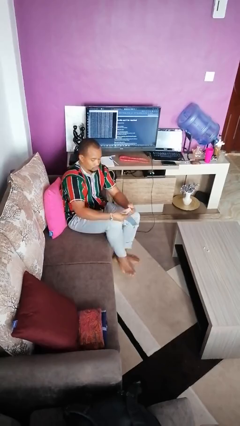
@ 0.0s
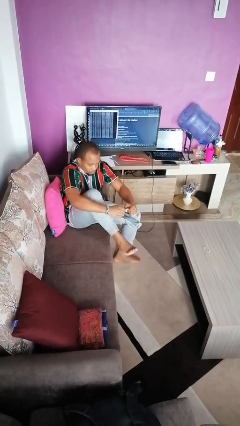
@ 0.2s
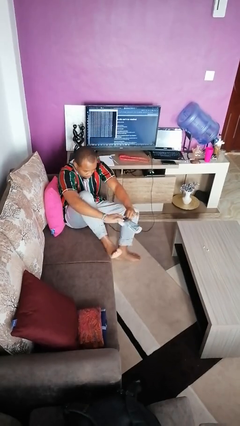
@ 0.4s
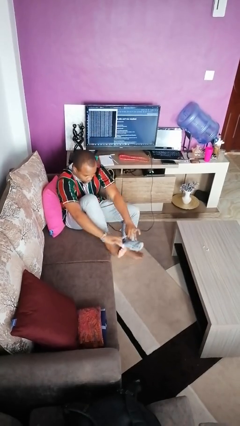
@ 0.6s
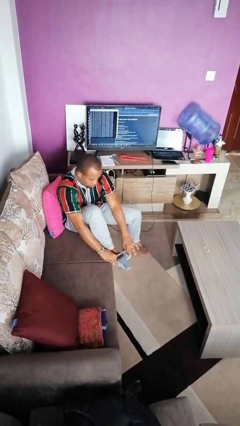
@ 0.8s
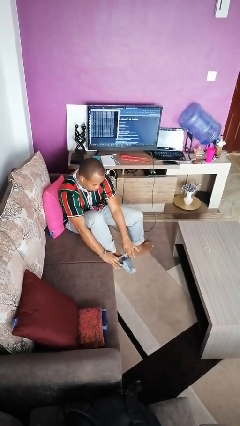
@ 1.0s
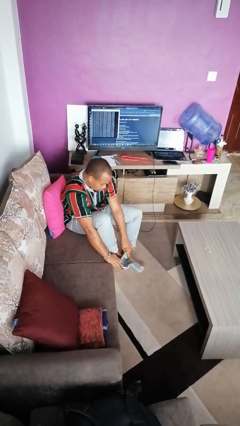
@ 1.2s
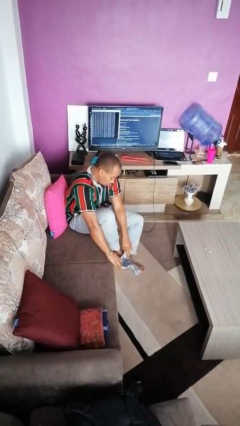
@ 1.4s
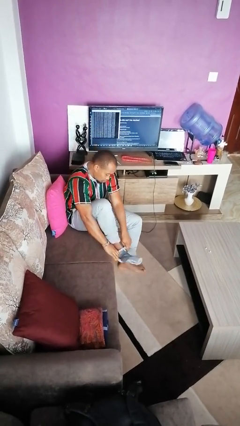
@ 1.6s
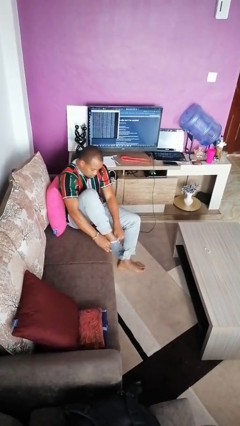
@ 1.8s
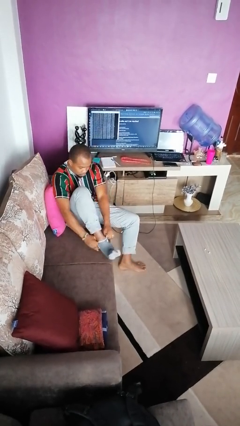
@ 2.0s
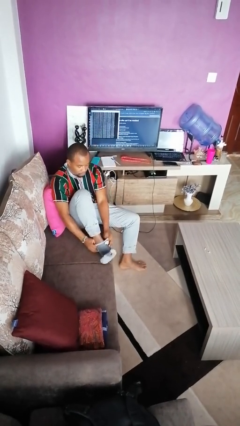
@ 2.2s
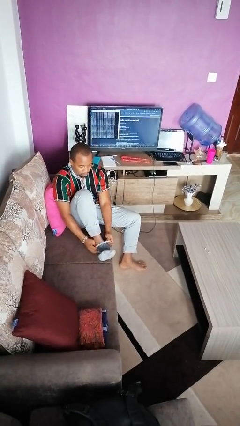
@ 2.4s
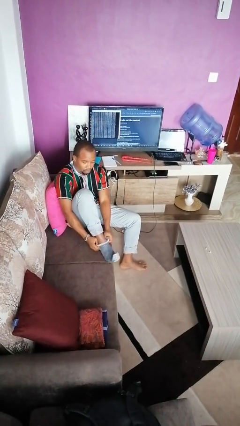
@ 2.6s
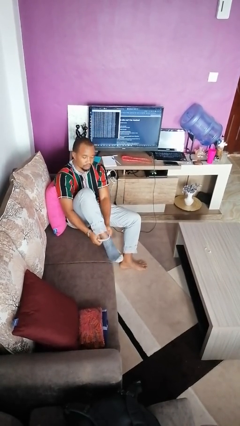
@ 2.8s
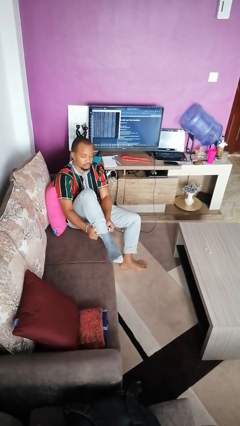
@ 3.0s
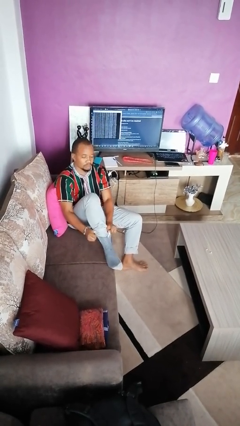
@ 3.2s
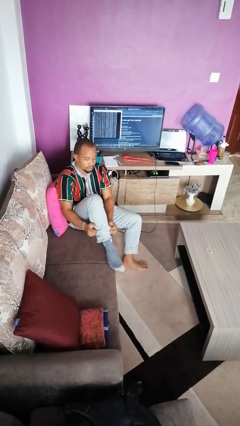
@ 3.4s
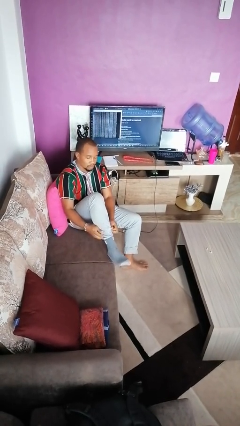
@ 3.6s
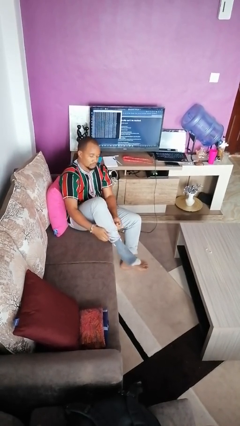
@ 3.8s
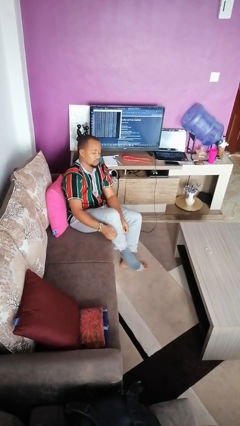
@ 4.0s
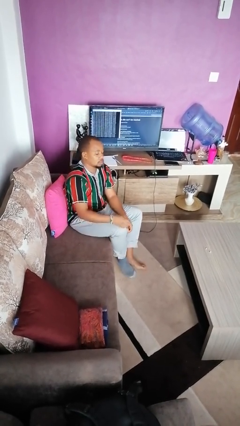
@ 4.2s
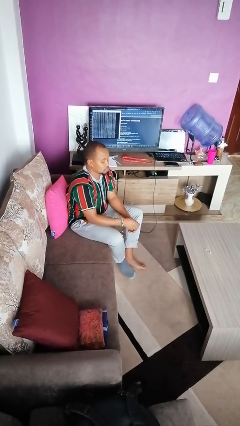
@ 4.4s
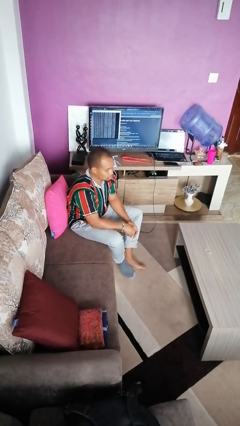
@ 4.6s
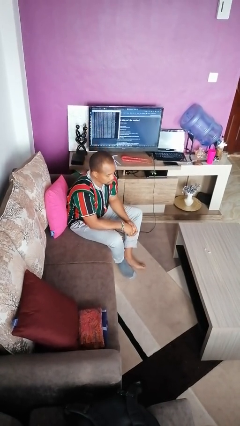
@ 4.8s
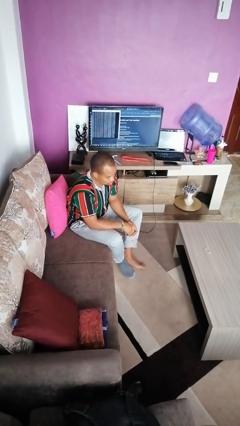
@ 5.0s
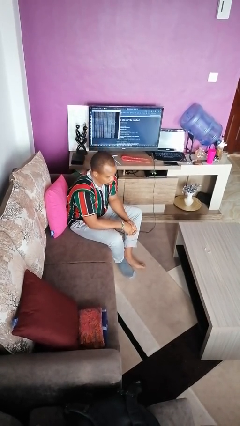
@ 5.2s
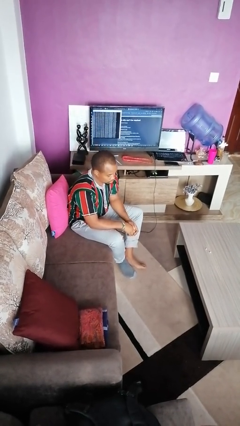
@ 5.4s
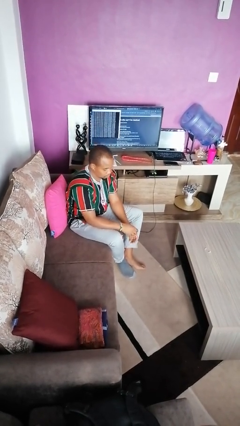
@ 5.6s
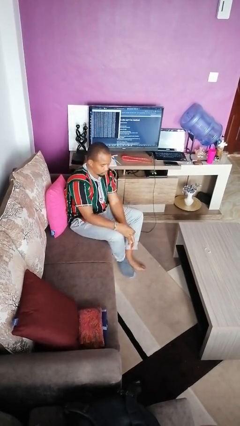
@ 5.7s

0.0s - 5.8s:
person puts on socks

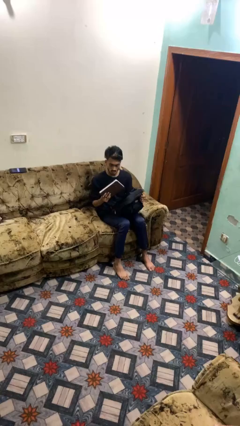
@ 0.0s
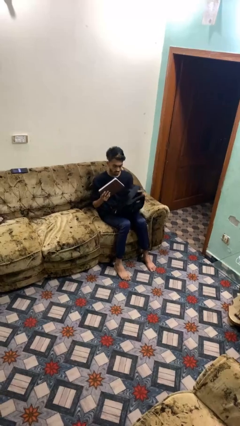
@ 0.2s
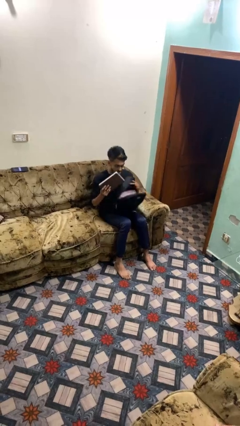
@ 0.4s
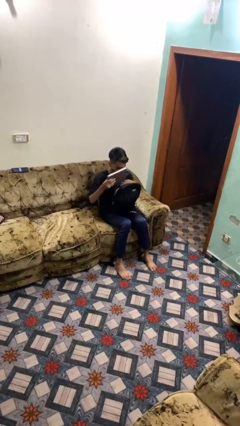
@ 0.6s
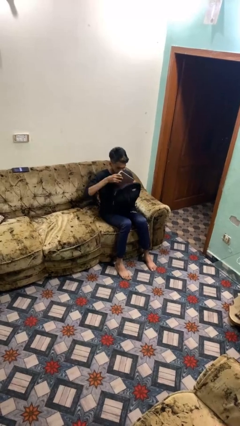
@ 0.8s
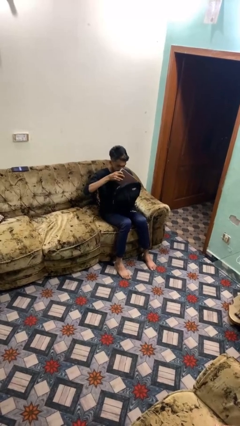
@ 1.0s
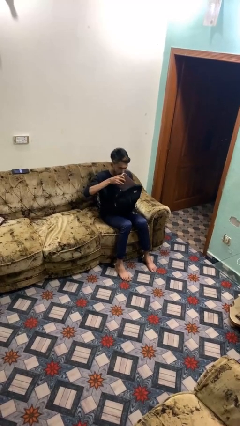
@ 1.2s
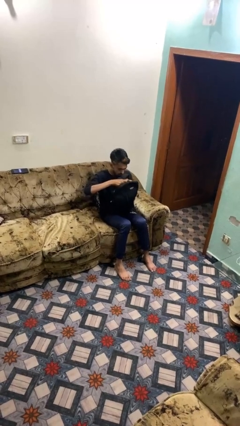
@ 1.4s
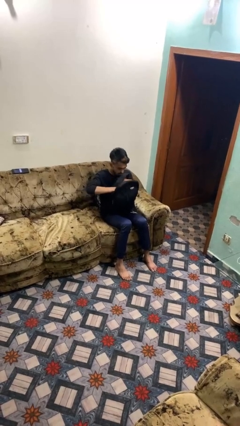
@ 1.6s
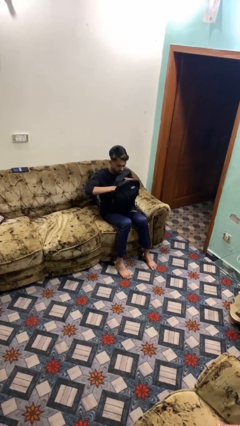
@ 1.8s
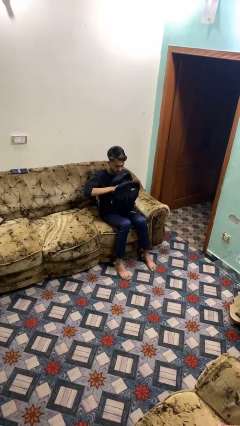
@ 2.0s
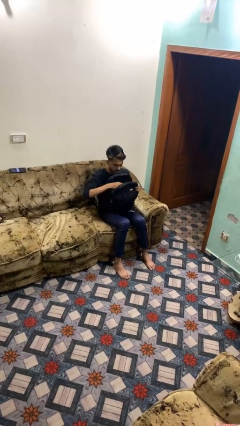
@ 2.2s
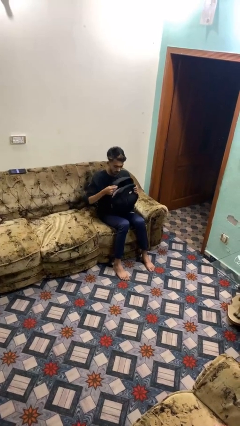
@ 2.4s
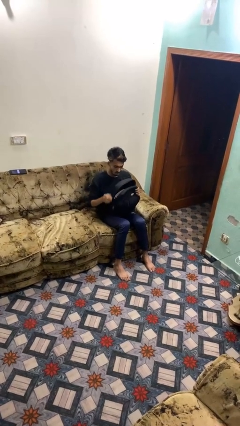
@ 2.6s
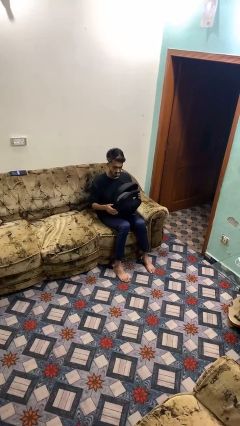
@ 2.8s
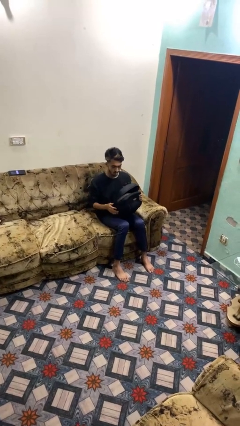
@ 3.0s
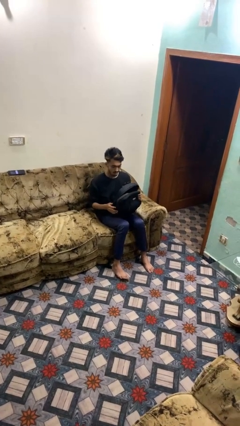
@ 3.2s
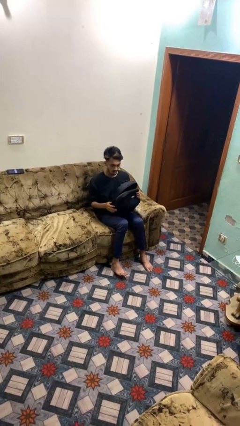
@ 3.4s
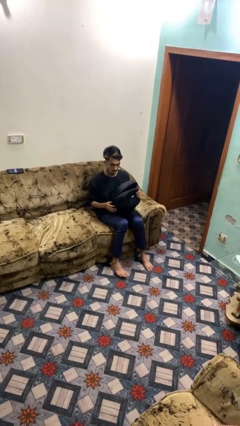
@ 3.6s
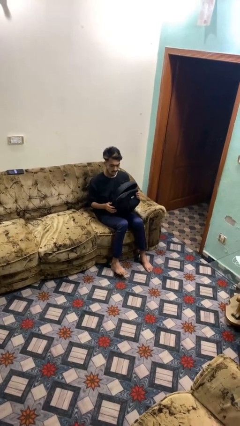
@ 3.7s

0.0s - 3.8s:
person puts object into backpack

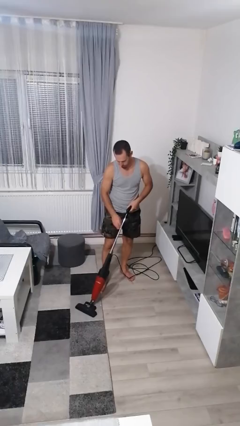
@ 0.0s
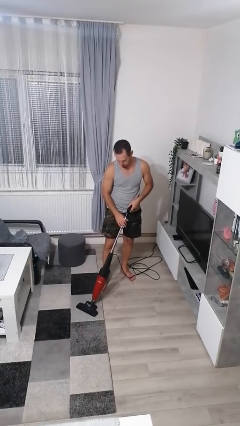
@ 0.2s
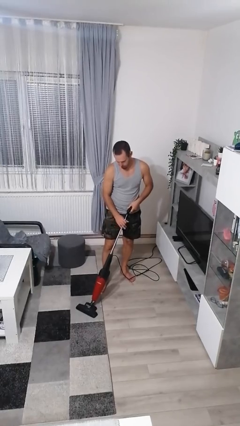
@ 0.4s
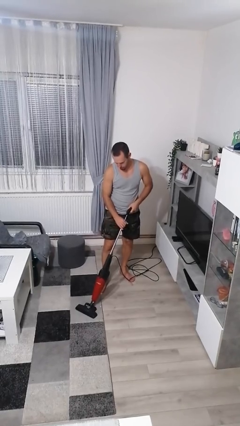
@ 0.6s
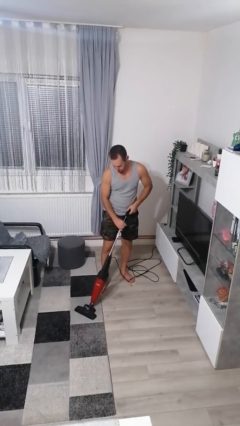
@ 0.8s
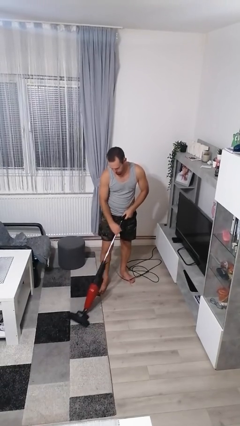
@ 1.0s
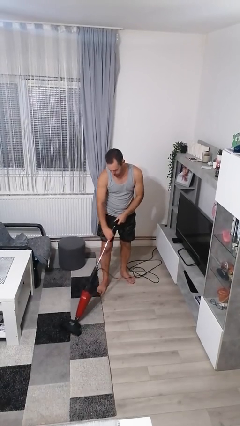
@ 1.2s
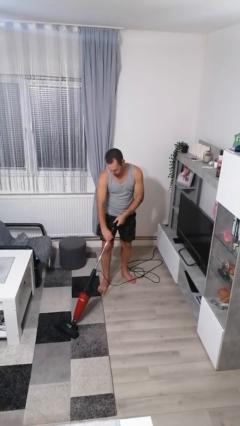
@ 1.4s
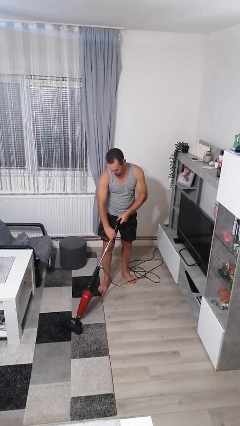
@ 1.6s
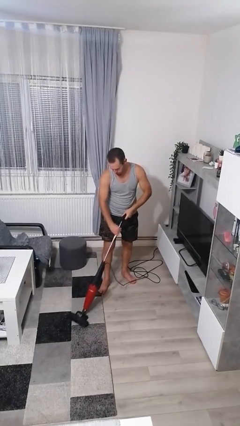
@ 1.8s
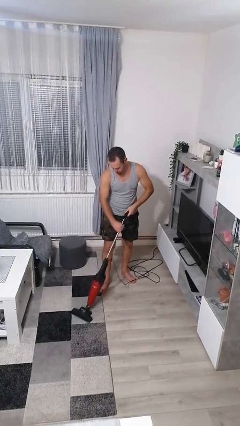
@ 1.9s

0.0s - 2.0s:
person vacuums carpet

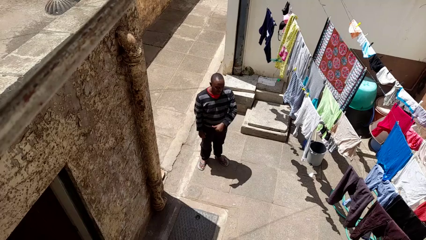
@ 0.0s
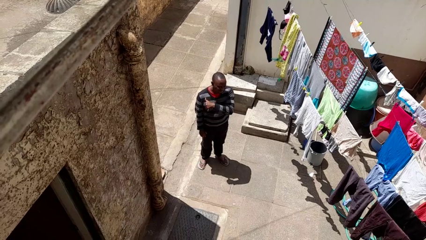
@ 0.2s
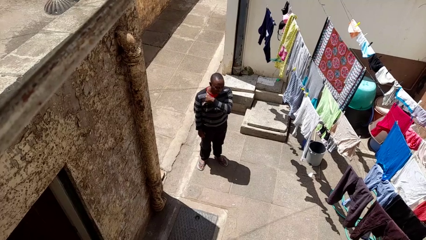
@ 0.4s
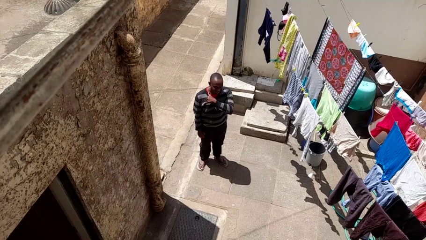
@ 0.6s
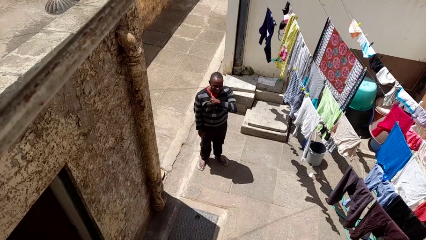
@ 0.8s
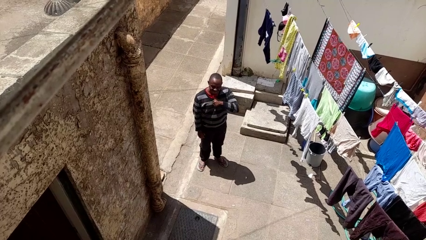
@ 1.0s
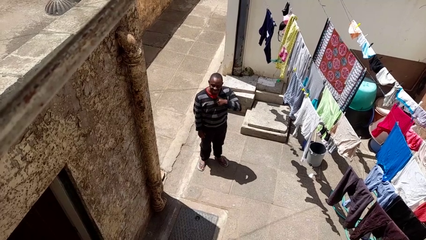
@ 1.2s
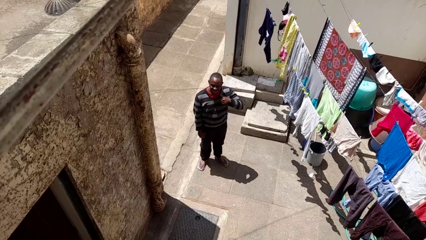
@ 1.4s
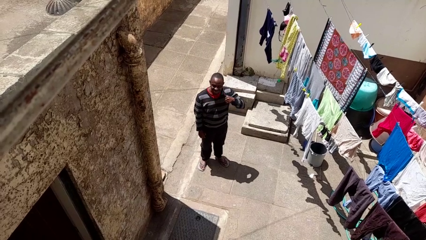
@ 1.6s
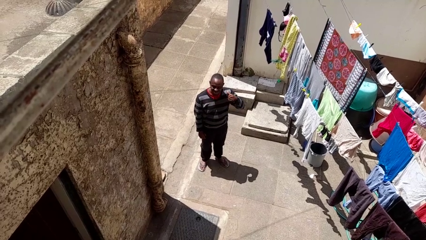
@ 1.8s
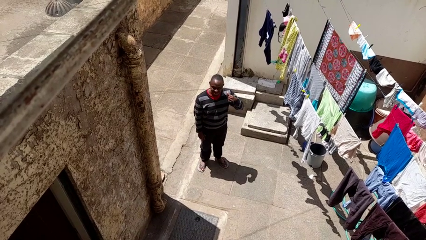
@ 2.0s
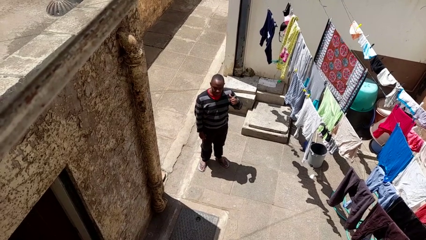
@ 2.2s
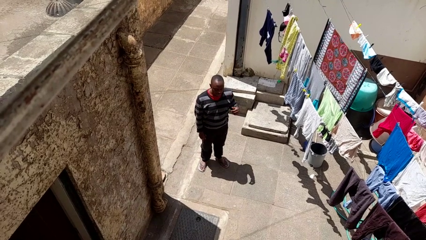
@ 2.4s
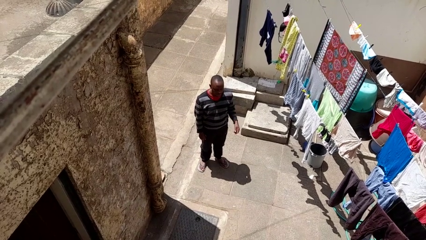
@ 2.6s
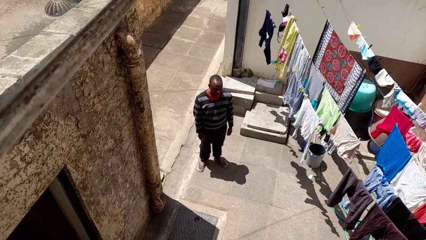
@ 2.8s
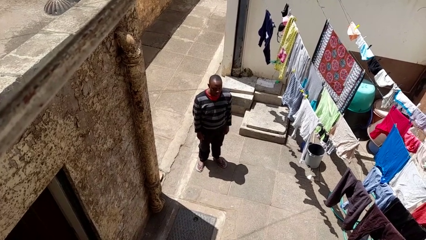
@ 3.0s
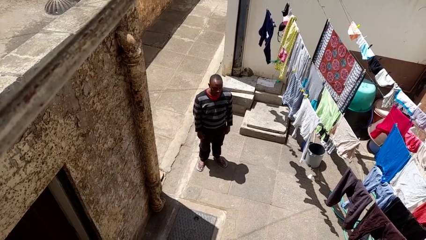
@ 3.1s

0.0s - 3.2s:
person gestures cut

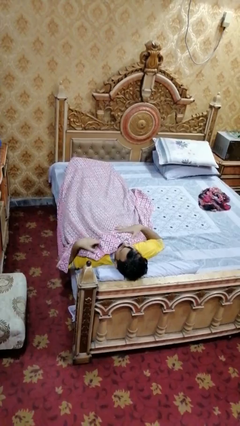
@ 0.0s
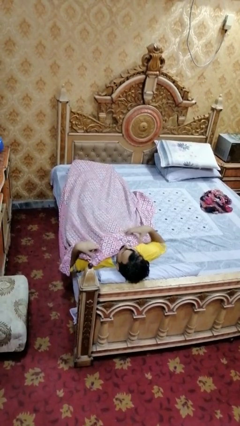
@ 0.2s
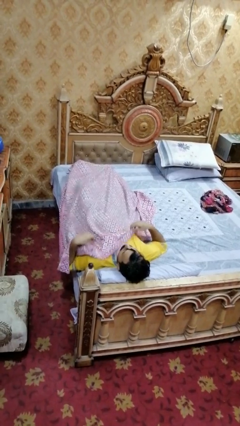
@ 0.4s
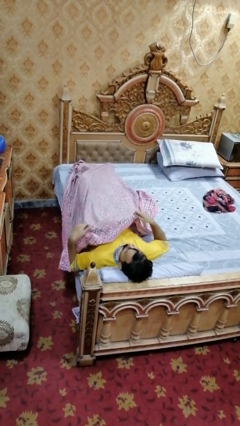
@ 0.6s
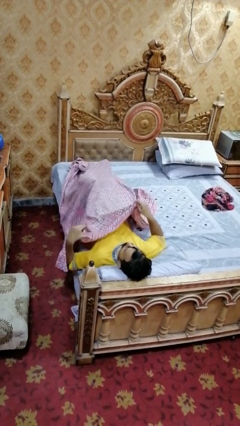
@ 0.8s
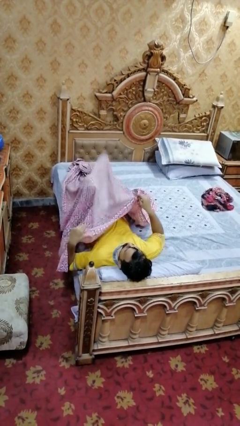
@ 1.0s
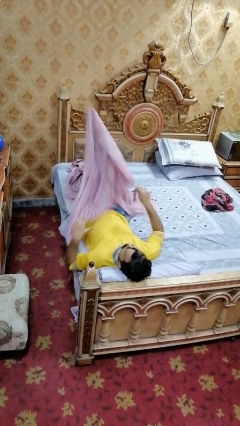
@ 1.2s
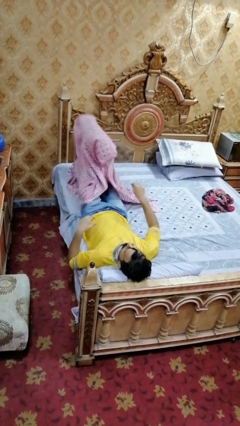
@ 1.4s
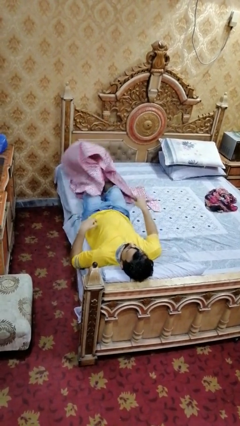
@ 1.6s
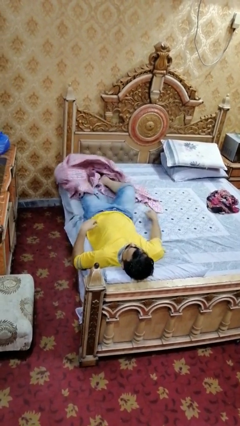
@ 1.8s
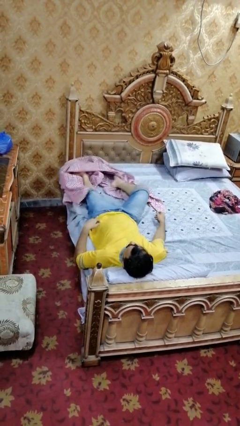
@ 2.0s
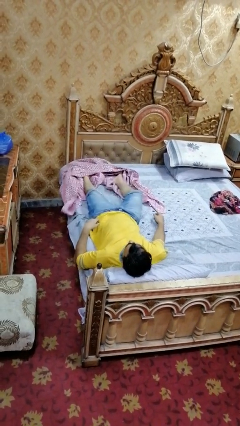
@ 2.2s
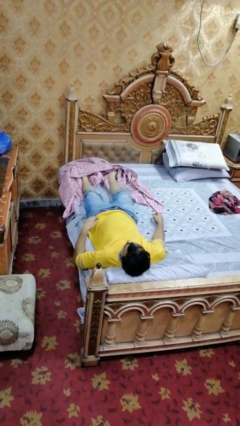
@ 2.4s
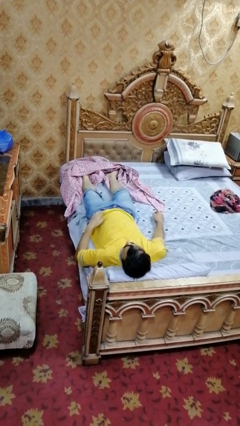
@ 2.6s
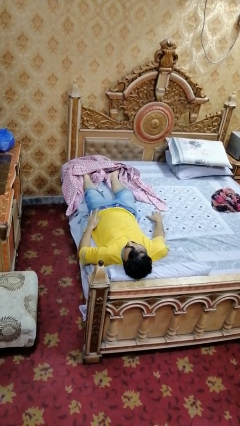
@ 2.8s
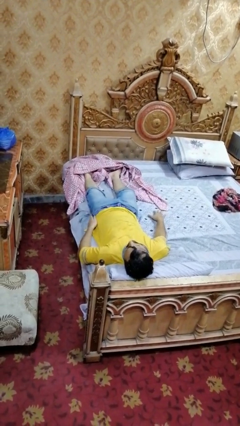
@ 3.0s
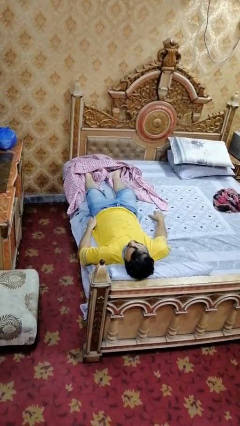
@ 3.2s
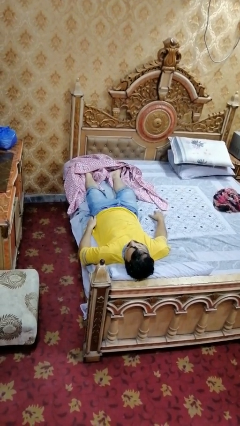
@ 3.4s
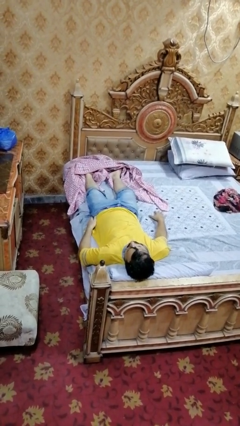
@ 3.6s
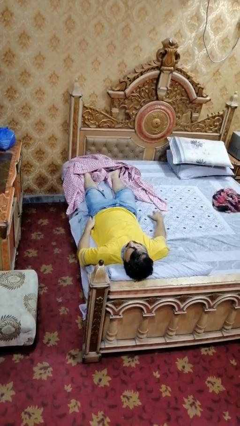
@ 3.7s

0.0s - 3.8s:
person uncovers with bedsheets
